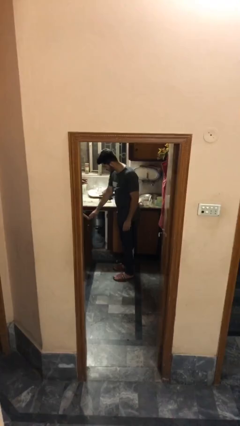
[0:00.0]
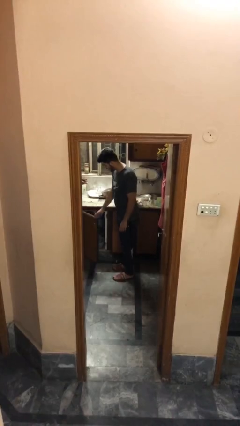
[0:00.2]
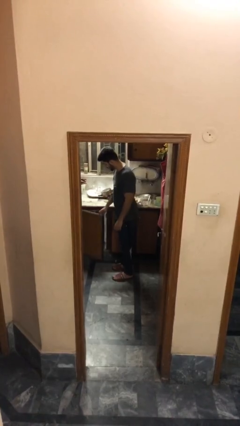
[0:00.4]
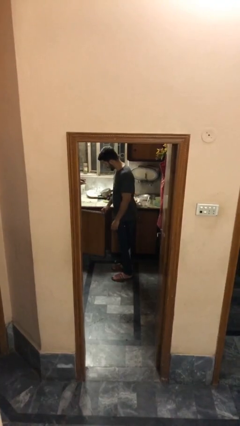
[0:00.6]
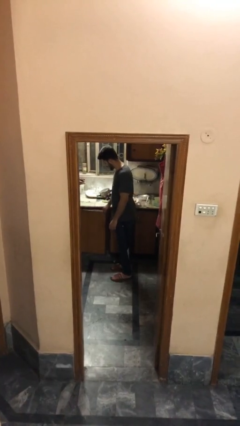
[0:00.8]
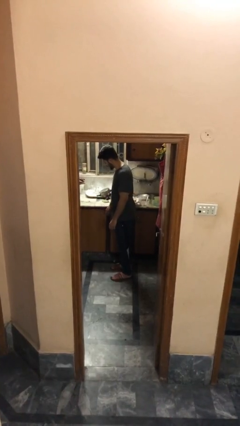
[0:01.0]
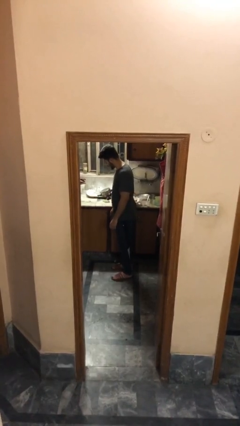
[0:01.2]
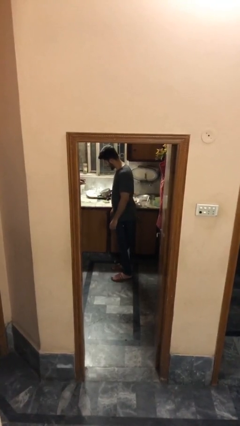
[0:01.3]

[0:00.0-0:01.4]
person closes cabinet

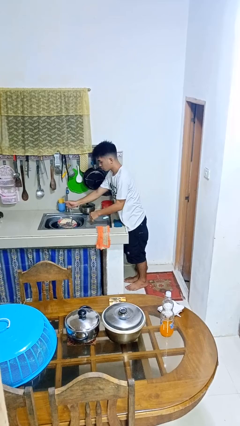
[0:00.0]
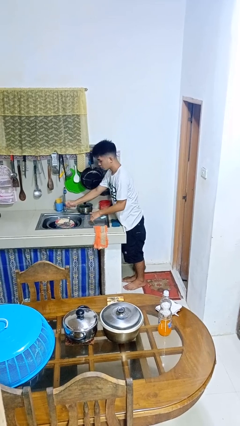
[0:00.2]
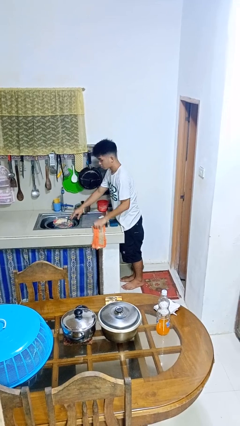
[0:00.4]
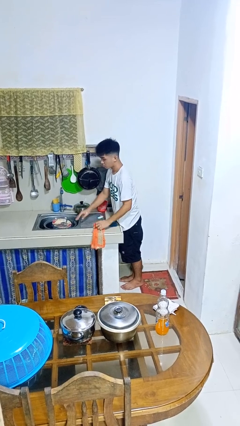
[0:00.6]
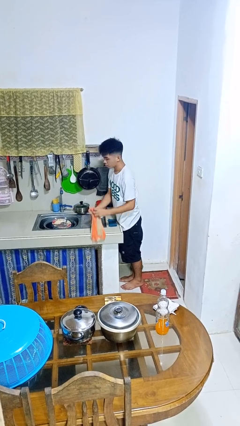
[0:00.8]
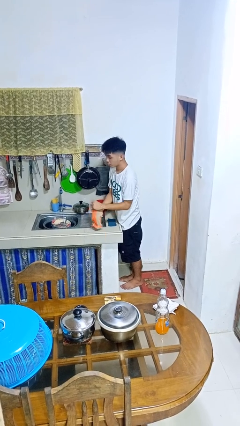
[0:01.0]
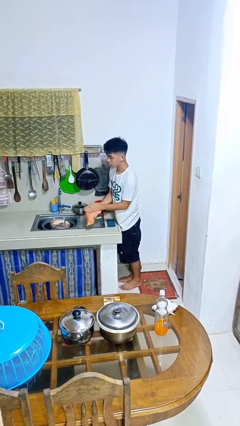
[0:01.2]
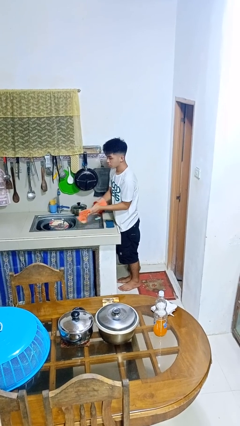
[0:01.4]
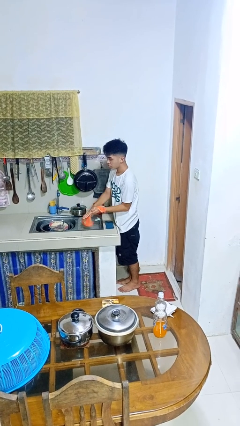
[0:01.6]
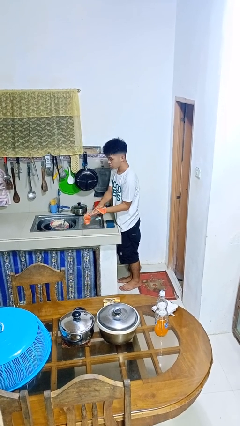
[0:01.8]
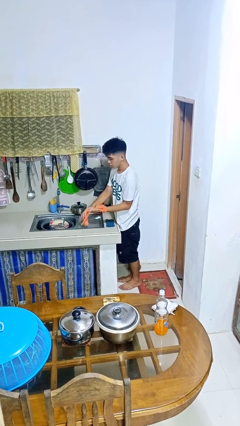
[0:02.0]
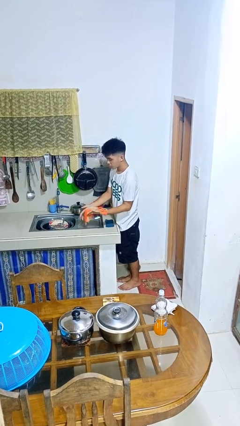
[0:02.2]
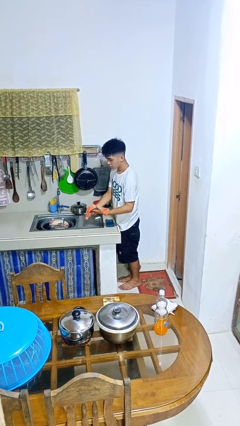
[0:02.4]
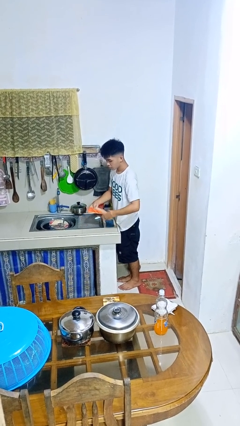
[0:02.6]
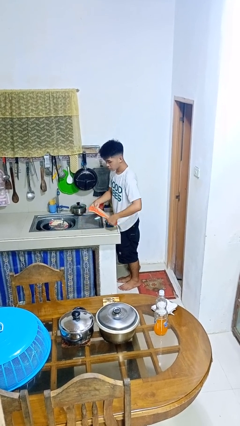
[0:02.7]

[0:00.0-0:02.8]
person dries hands with towel

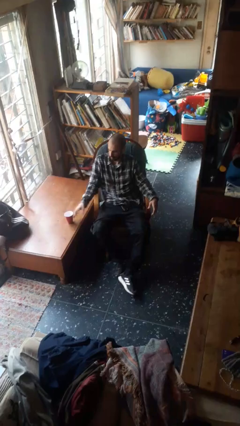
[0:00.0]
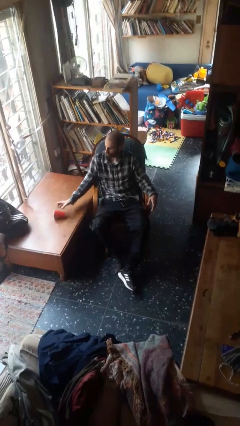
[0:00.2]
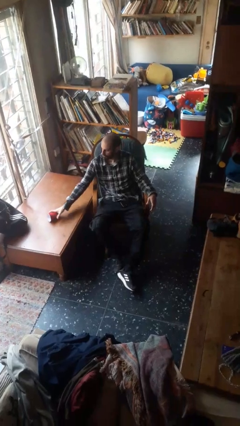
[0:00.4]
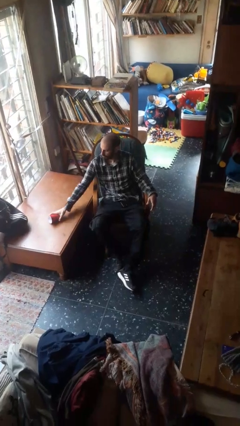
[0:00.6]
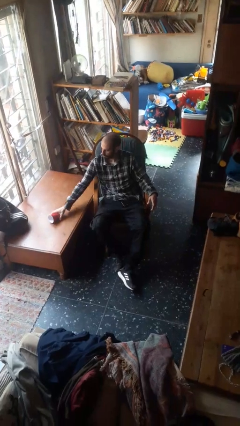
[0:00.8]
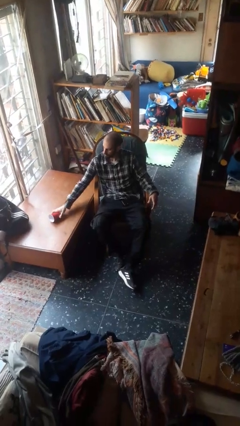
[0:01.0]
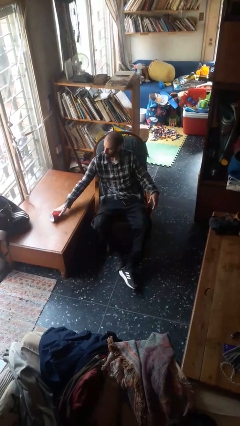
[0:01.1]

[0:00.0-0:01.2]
person knocks over glass

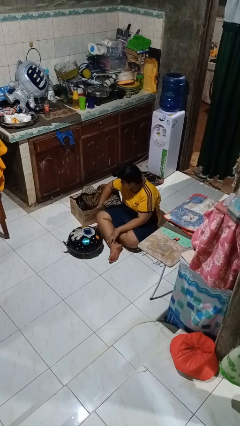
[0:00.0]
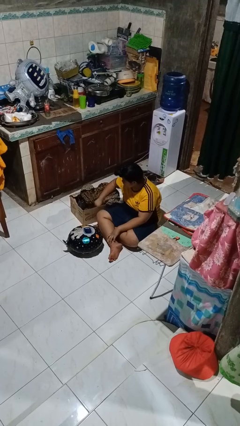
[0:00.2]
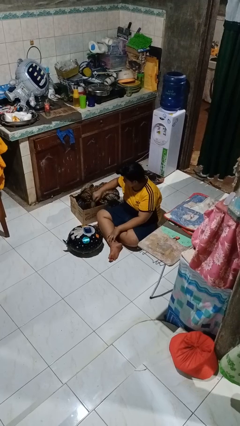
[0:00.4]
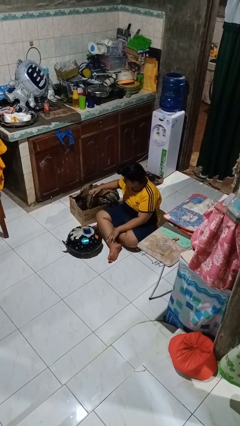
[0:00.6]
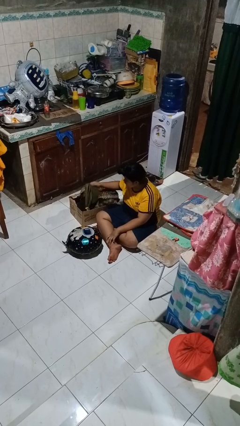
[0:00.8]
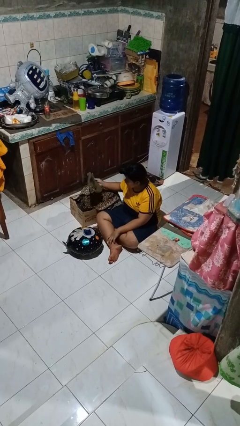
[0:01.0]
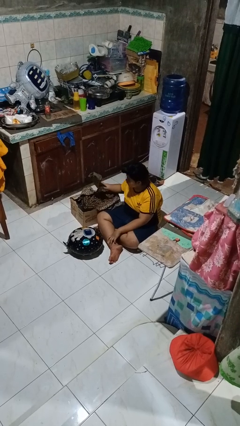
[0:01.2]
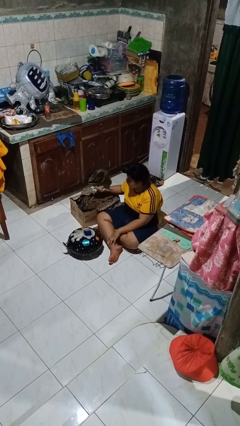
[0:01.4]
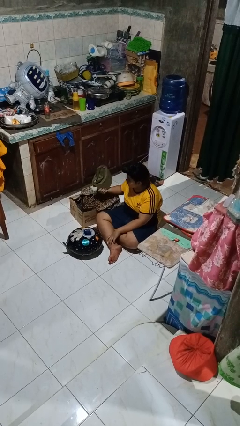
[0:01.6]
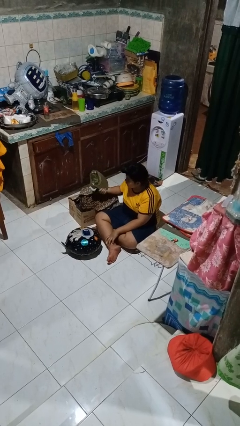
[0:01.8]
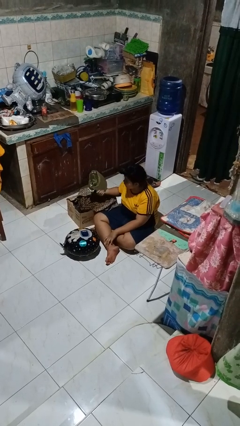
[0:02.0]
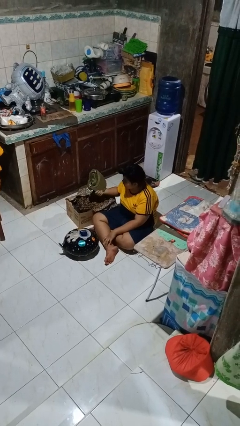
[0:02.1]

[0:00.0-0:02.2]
person takes object from box

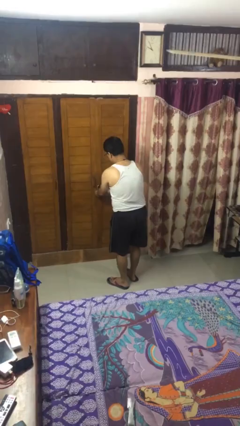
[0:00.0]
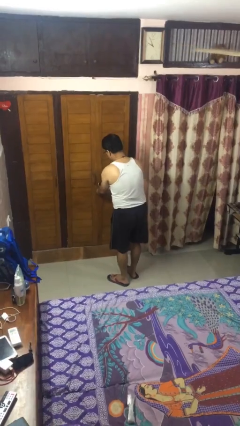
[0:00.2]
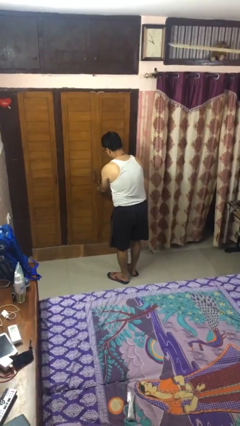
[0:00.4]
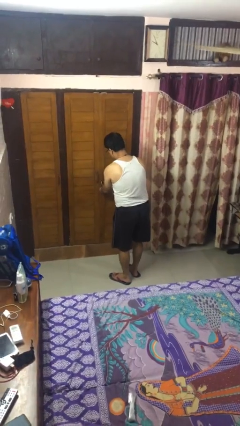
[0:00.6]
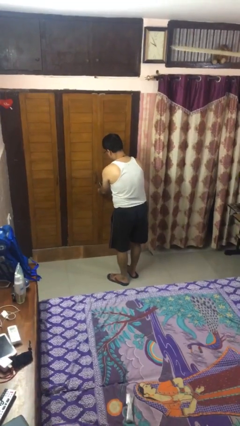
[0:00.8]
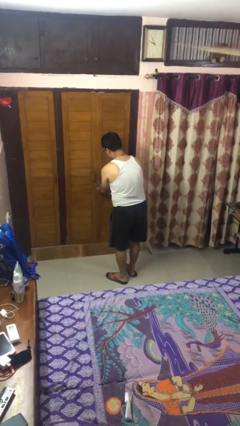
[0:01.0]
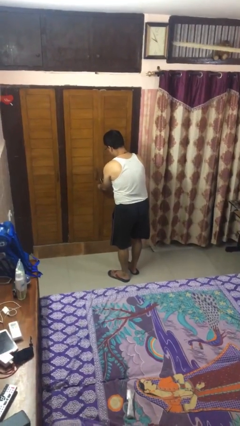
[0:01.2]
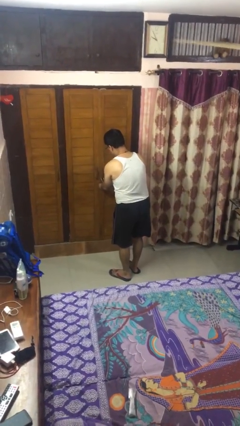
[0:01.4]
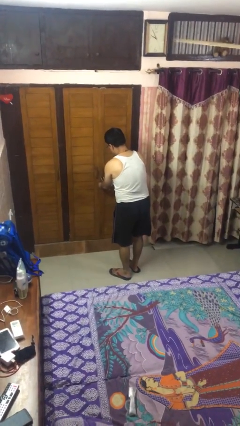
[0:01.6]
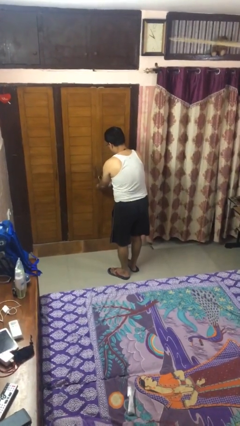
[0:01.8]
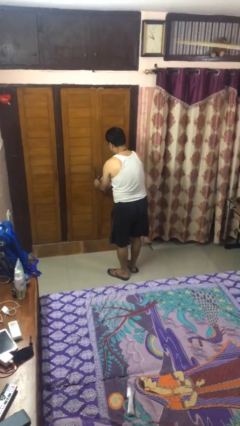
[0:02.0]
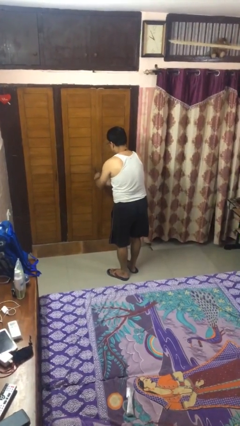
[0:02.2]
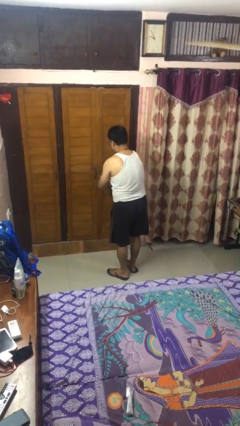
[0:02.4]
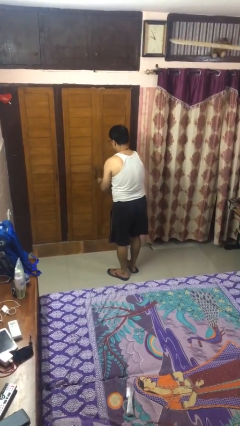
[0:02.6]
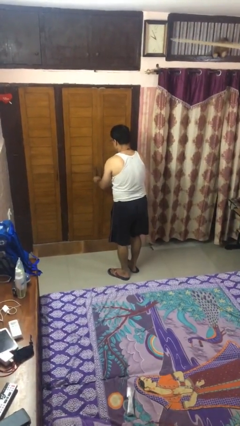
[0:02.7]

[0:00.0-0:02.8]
person unlocks door with keys

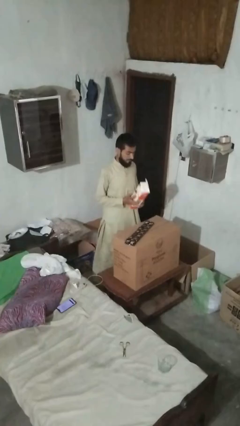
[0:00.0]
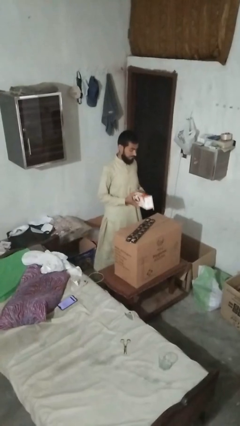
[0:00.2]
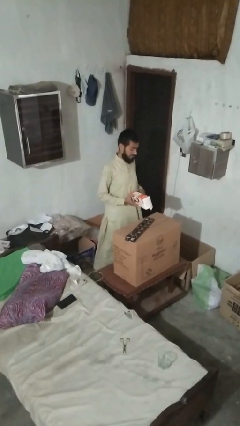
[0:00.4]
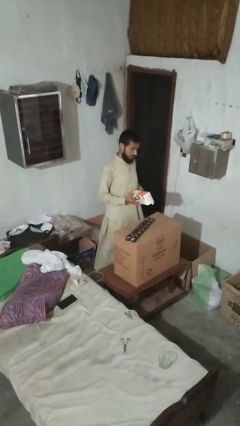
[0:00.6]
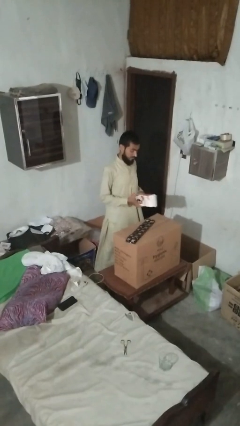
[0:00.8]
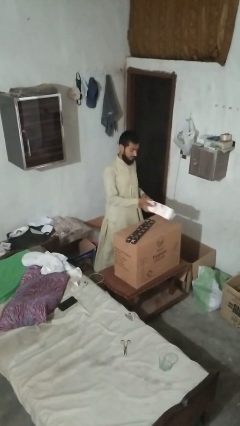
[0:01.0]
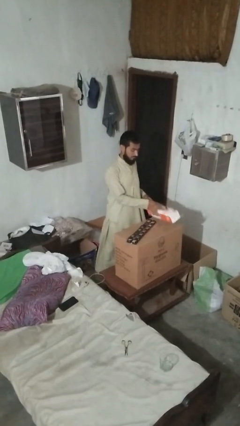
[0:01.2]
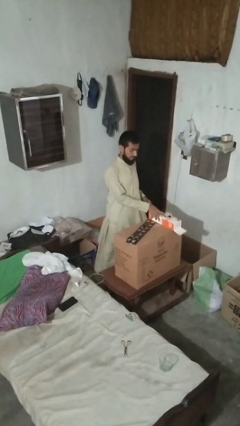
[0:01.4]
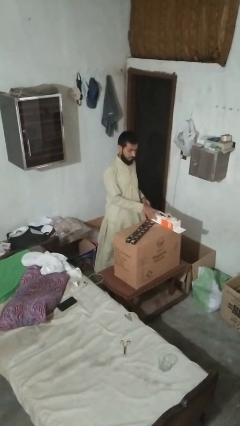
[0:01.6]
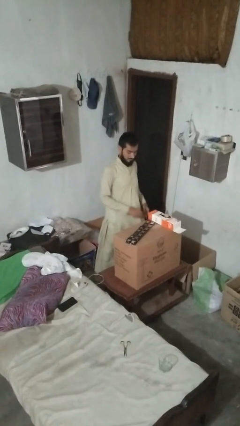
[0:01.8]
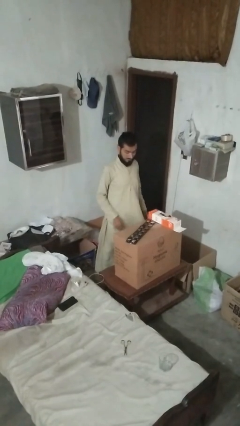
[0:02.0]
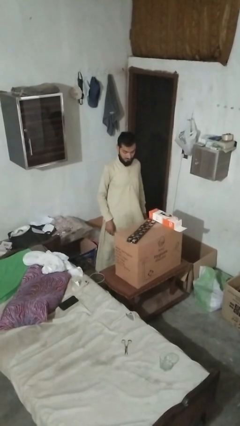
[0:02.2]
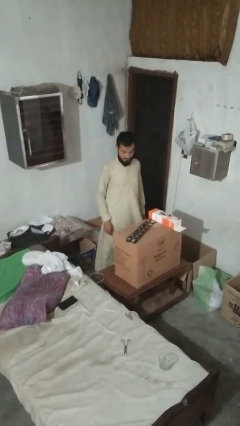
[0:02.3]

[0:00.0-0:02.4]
person puts down object on countertop

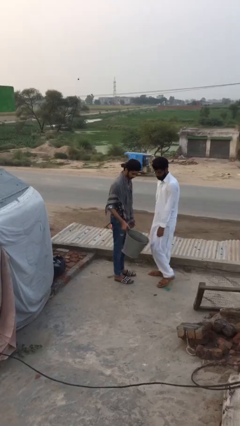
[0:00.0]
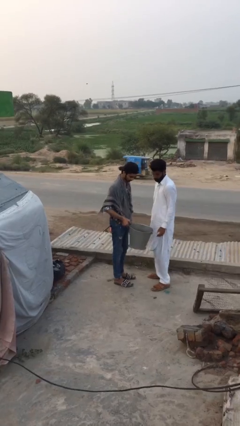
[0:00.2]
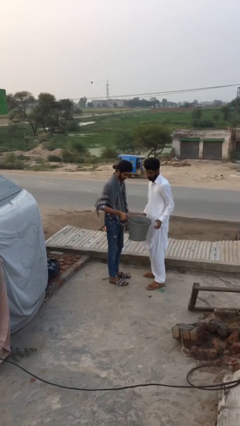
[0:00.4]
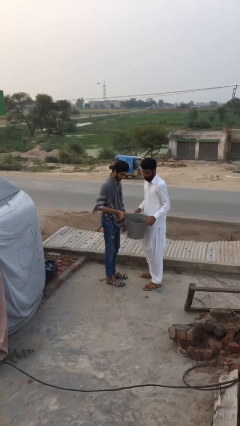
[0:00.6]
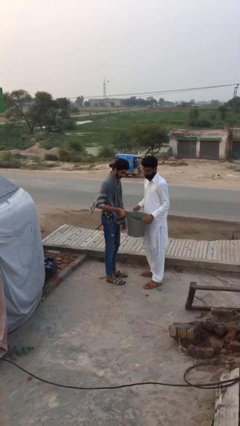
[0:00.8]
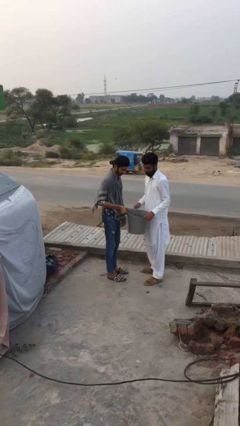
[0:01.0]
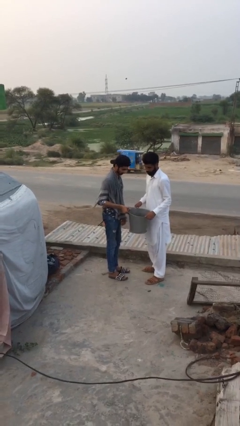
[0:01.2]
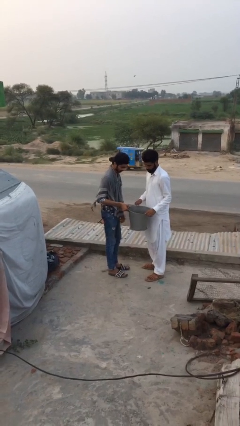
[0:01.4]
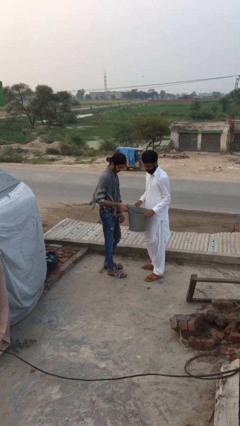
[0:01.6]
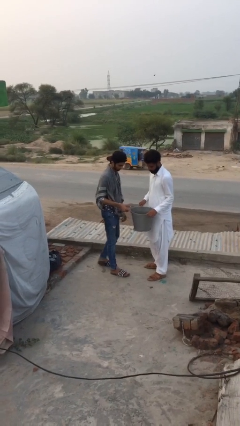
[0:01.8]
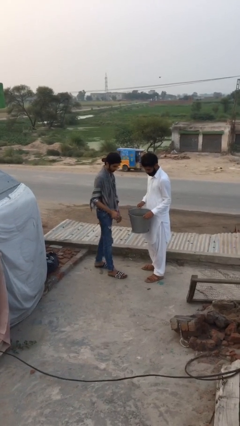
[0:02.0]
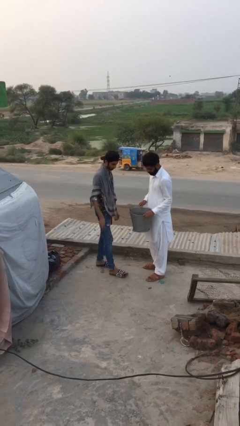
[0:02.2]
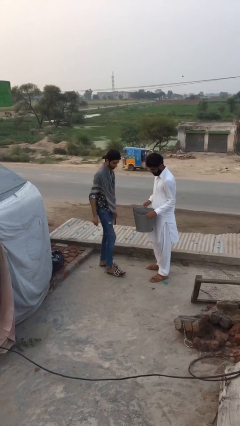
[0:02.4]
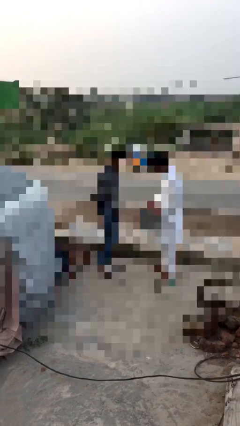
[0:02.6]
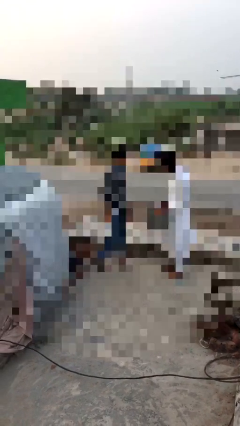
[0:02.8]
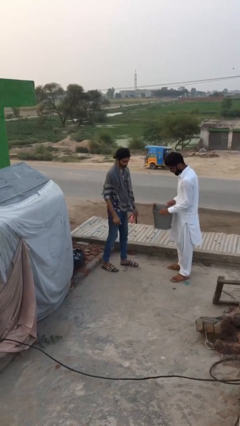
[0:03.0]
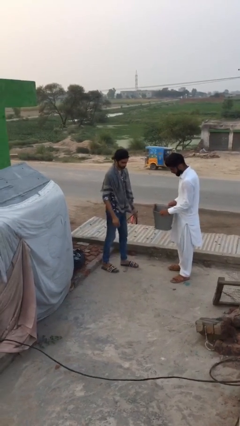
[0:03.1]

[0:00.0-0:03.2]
person transfers object to person

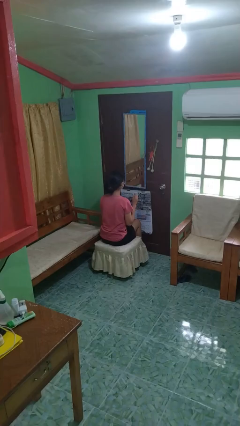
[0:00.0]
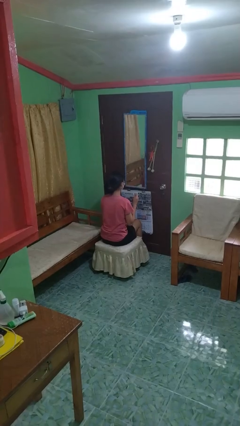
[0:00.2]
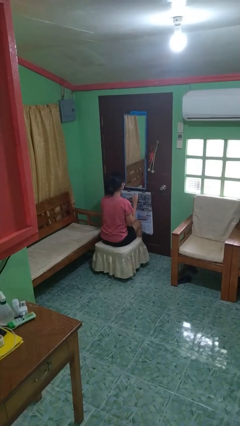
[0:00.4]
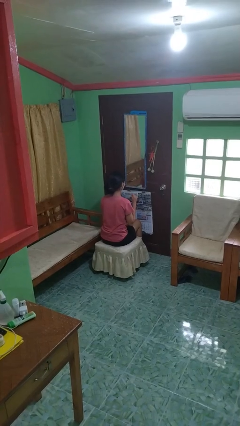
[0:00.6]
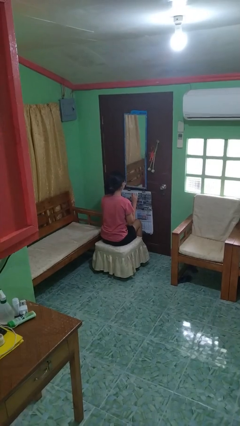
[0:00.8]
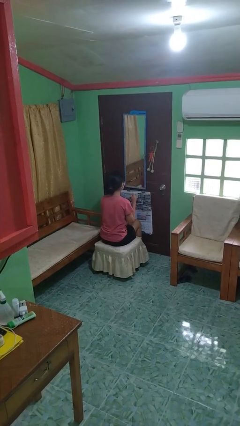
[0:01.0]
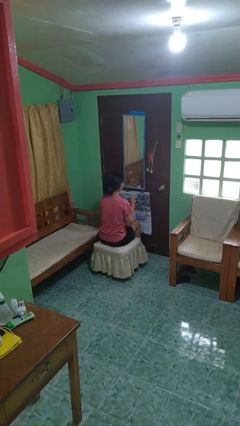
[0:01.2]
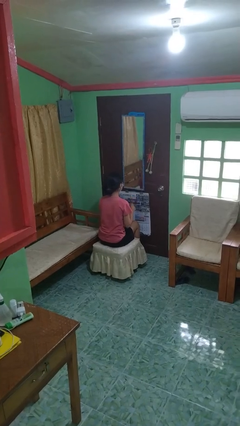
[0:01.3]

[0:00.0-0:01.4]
person snaps fingers
